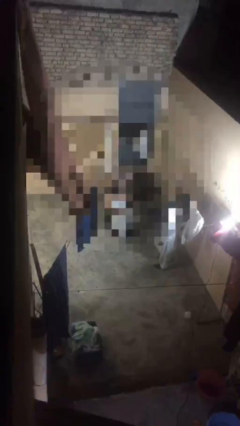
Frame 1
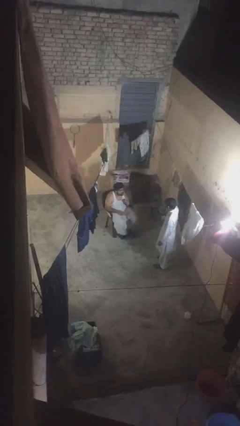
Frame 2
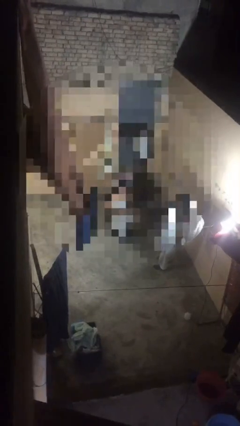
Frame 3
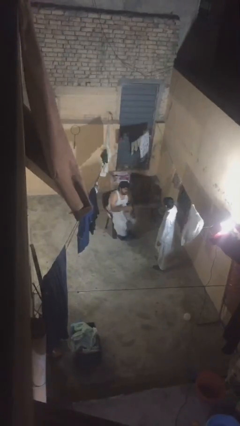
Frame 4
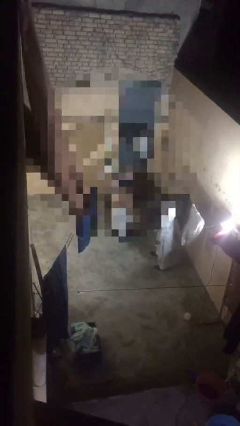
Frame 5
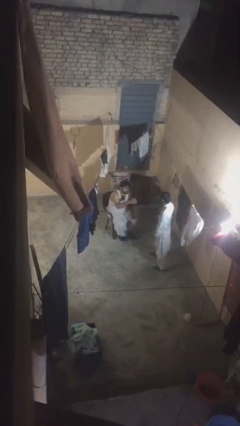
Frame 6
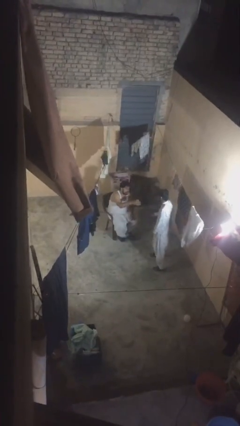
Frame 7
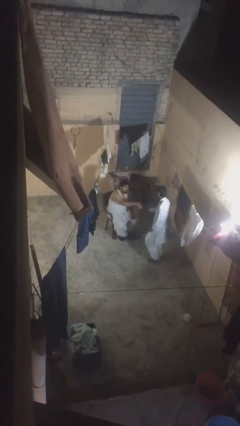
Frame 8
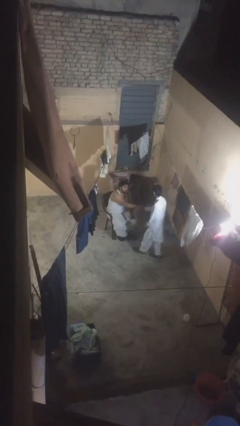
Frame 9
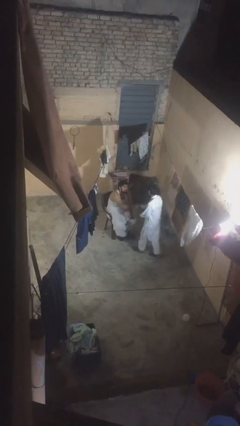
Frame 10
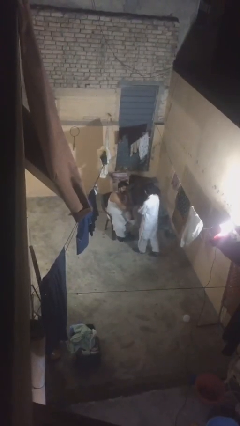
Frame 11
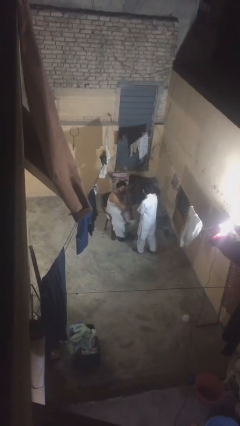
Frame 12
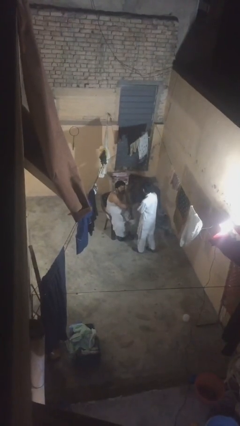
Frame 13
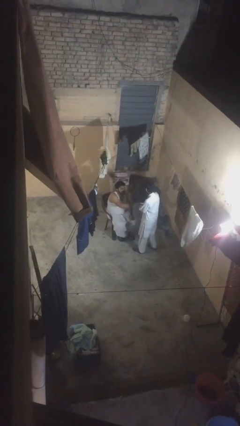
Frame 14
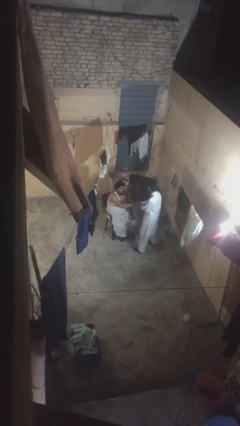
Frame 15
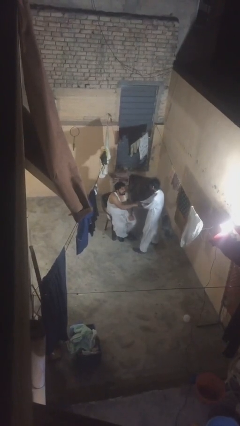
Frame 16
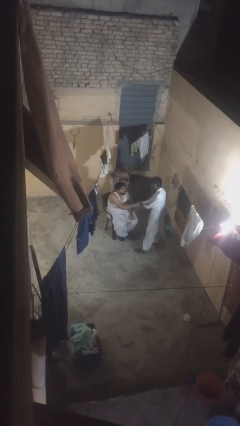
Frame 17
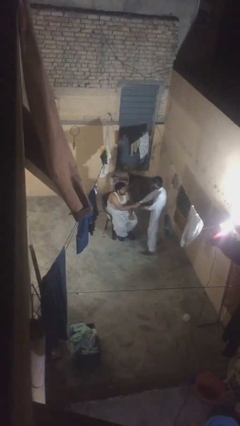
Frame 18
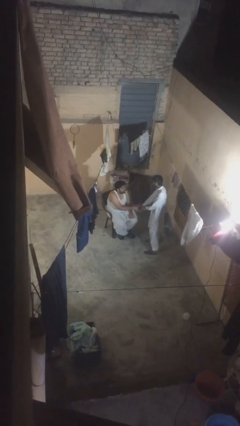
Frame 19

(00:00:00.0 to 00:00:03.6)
person shakes hand

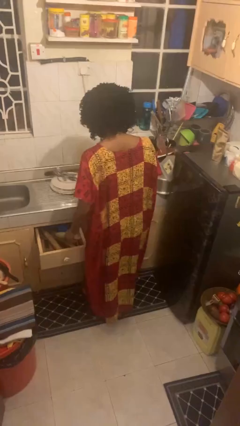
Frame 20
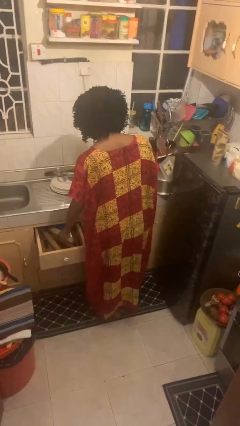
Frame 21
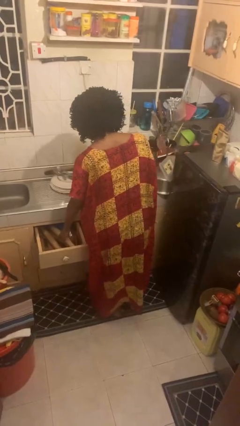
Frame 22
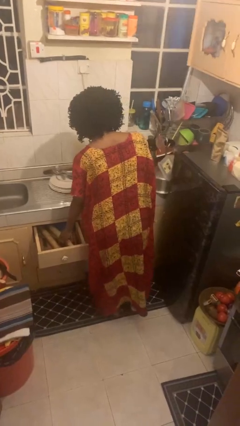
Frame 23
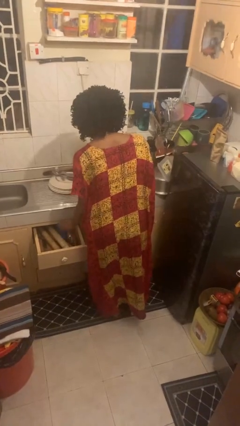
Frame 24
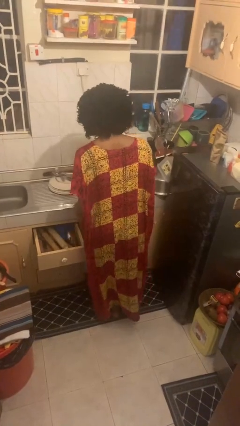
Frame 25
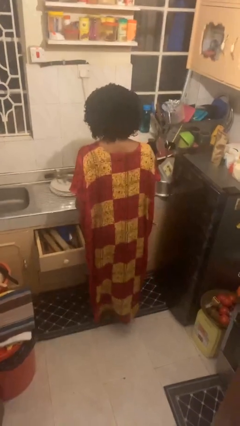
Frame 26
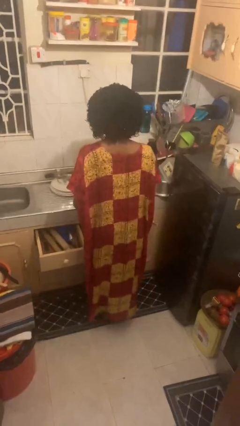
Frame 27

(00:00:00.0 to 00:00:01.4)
person puts object into kitchen drawer

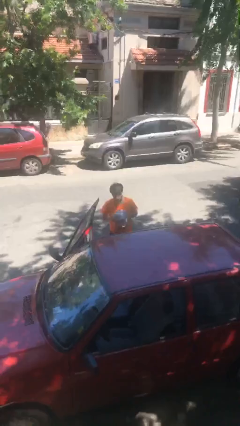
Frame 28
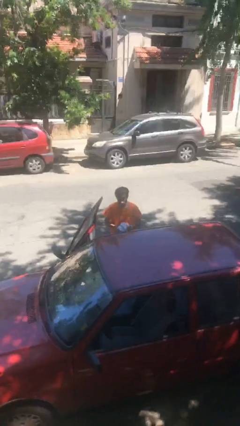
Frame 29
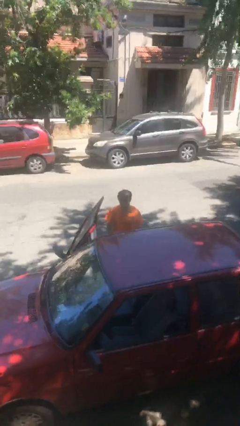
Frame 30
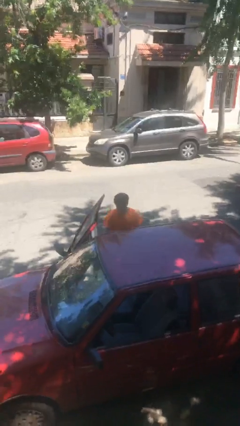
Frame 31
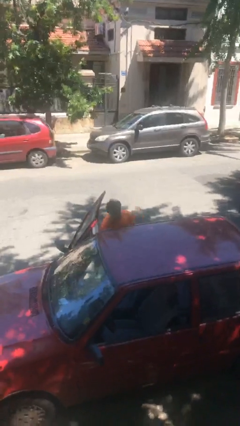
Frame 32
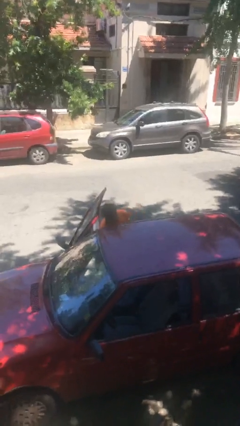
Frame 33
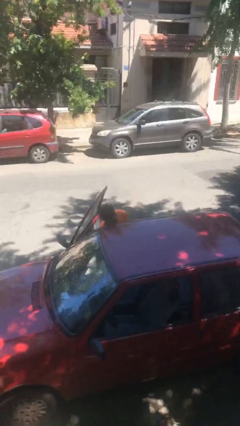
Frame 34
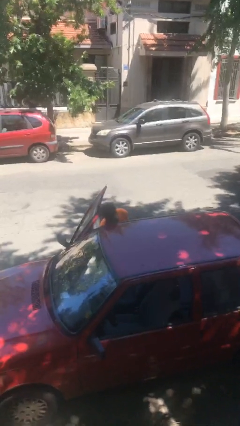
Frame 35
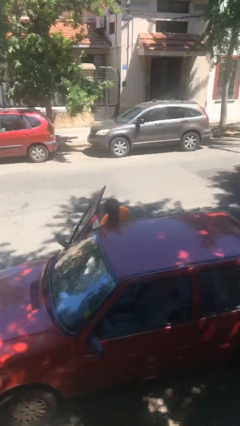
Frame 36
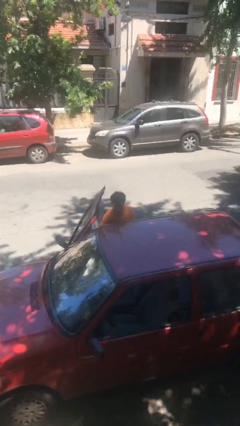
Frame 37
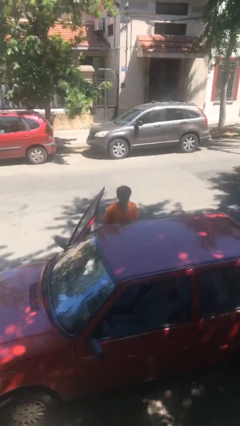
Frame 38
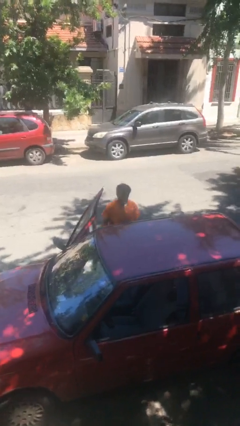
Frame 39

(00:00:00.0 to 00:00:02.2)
person loads car

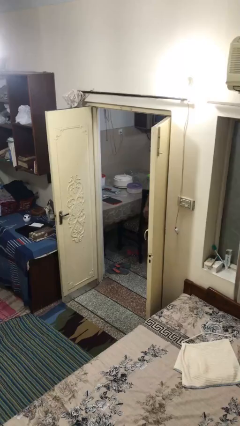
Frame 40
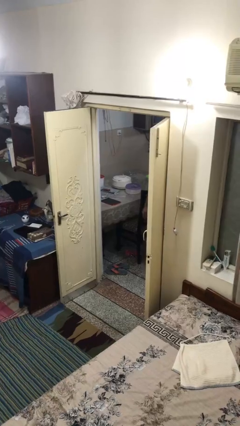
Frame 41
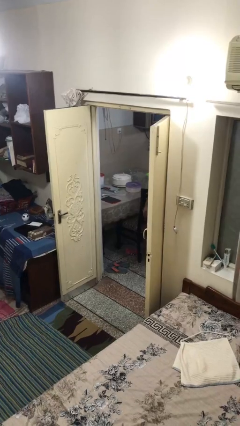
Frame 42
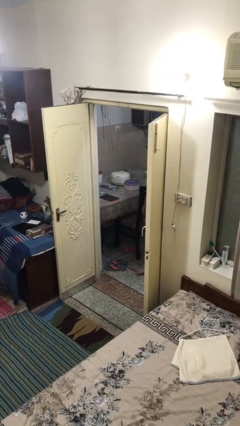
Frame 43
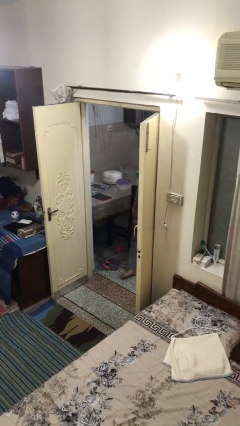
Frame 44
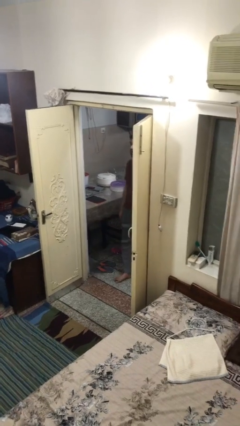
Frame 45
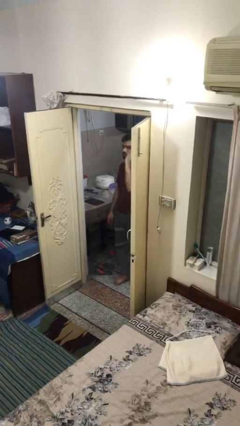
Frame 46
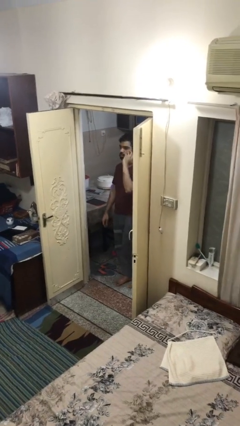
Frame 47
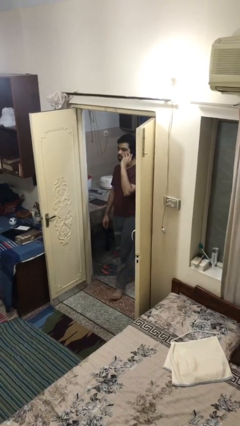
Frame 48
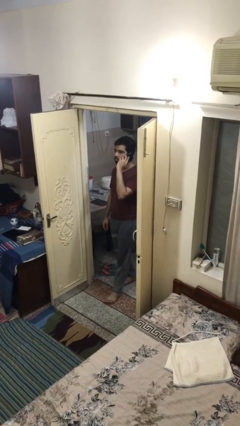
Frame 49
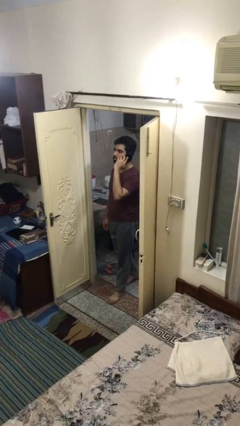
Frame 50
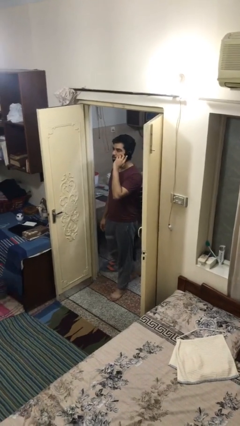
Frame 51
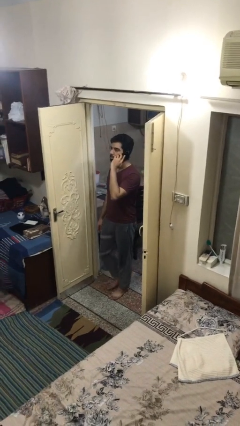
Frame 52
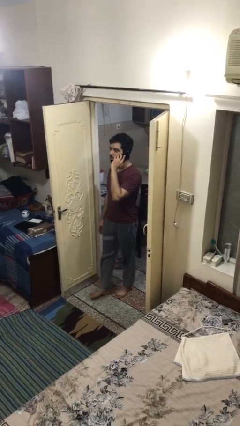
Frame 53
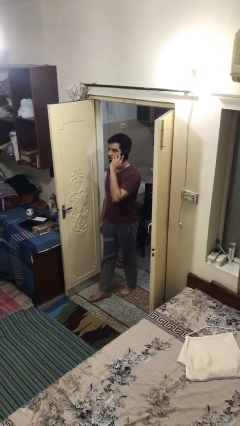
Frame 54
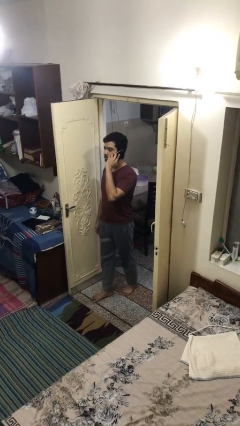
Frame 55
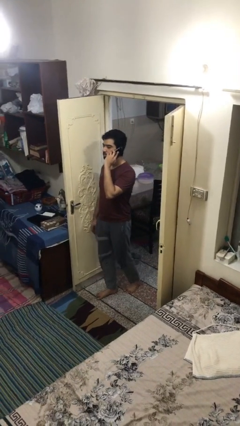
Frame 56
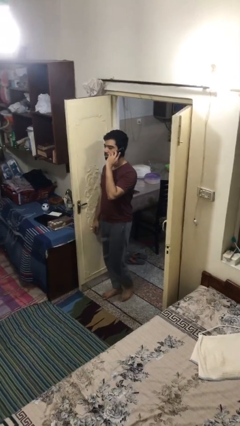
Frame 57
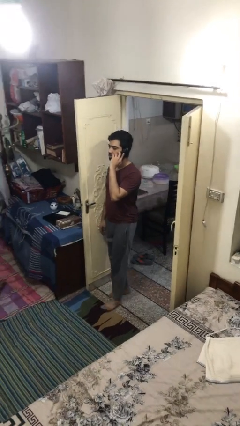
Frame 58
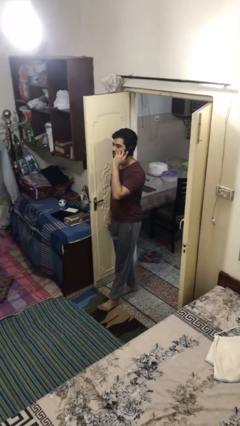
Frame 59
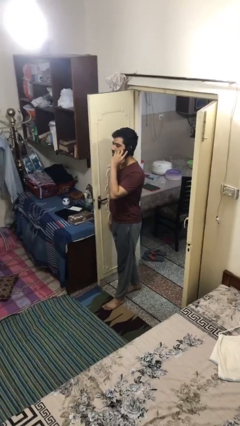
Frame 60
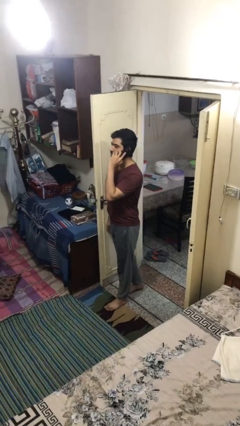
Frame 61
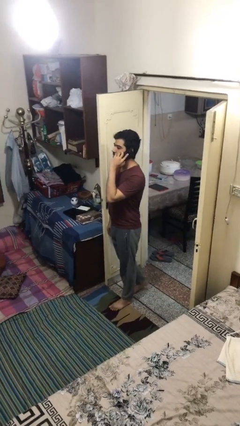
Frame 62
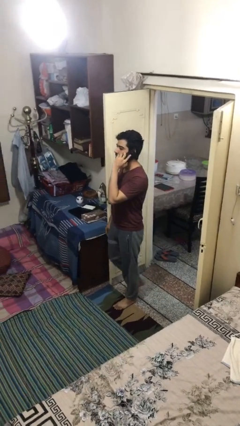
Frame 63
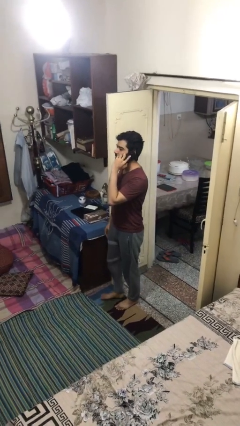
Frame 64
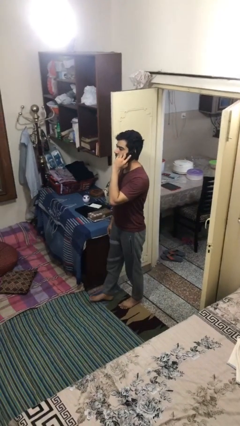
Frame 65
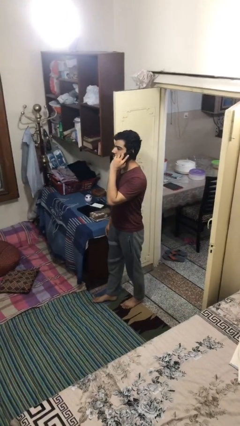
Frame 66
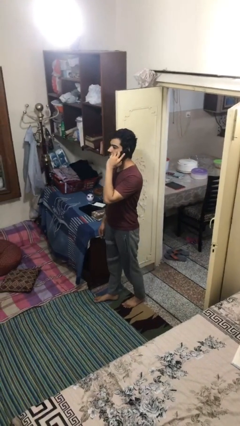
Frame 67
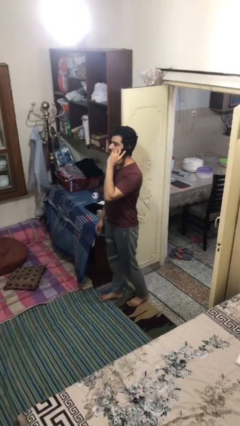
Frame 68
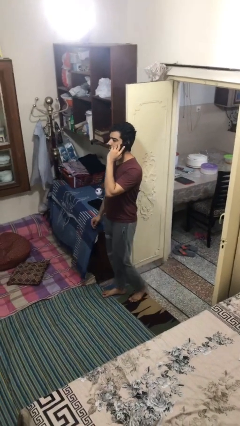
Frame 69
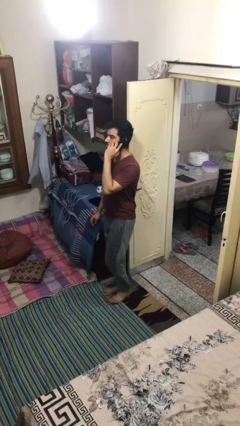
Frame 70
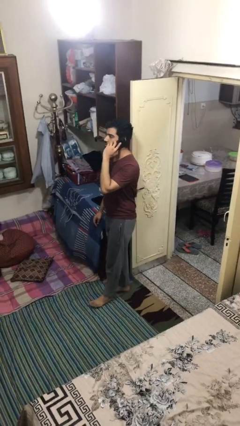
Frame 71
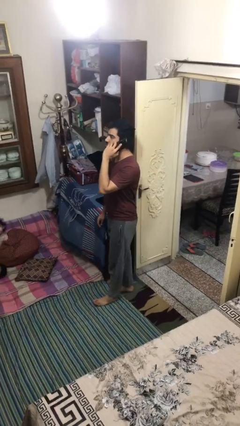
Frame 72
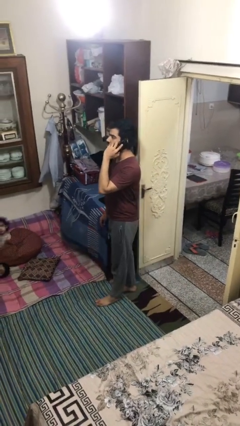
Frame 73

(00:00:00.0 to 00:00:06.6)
person enters scene through structure

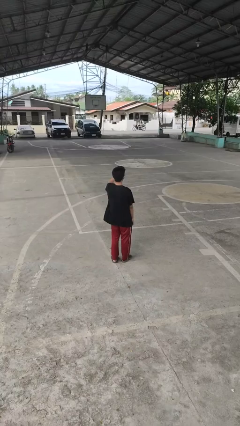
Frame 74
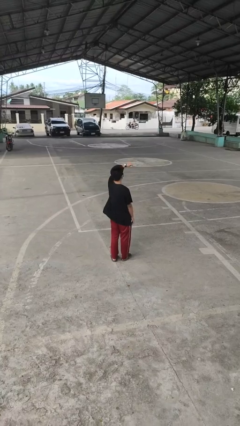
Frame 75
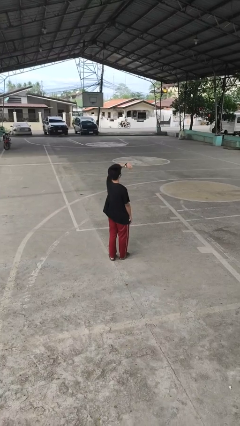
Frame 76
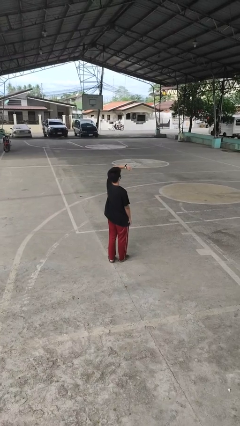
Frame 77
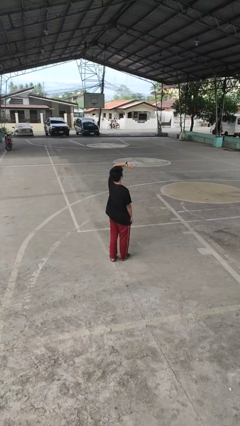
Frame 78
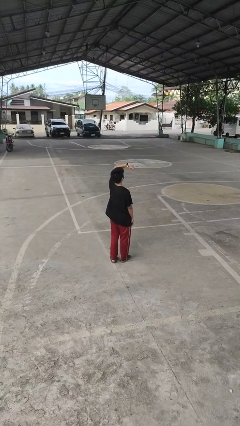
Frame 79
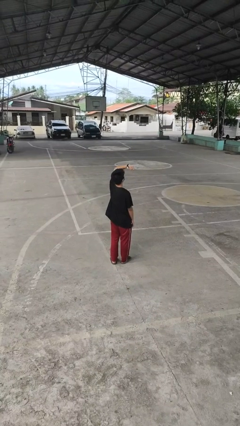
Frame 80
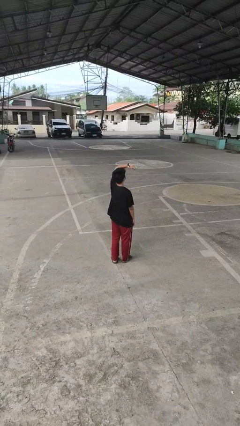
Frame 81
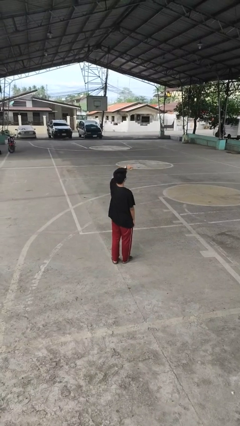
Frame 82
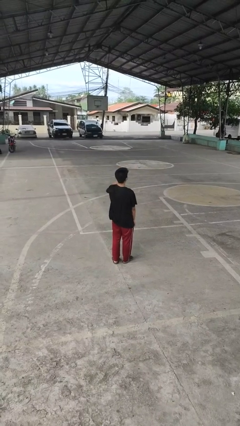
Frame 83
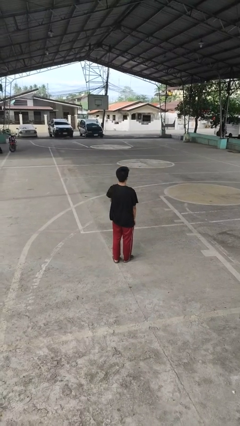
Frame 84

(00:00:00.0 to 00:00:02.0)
person looks at wristwatch

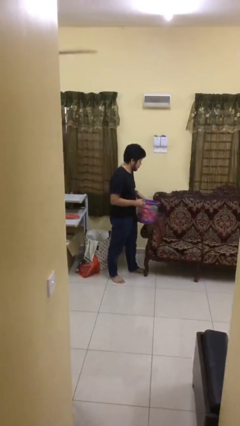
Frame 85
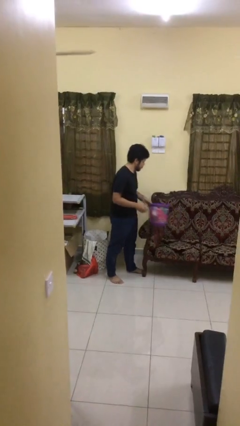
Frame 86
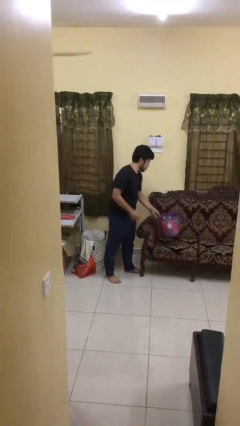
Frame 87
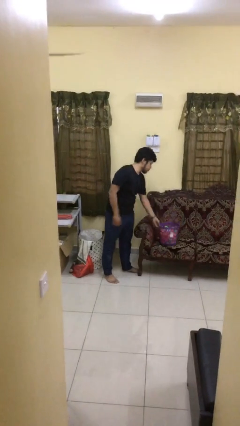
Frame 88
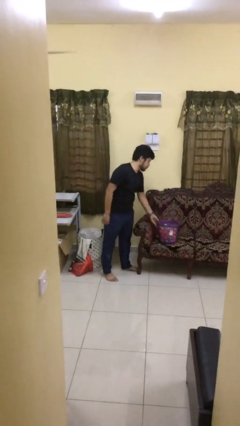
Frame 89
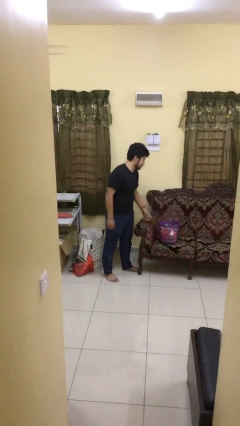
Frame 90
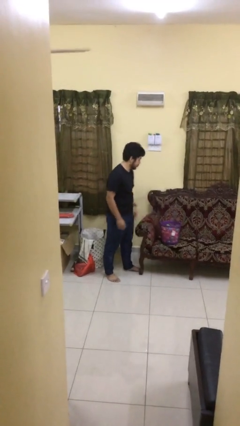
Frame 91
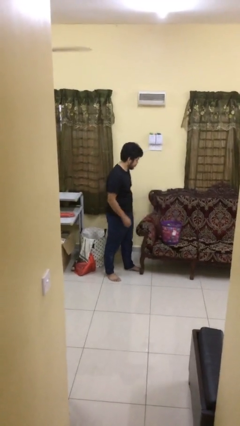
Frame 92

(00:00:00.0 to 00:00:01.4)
person puts down object on couch
